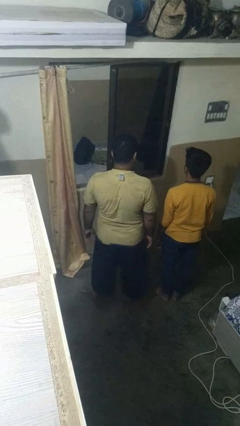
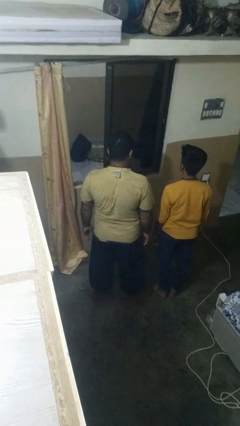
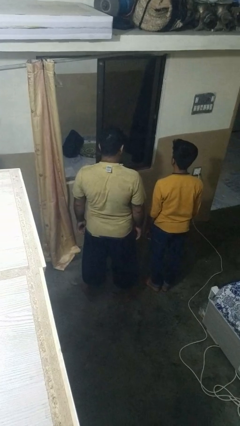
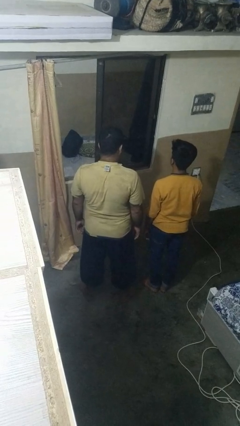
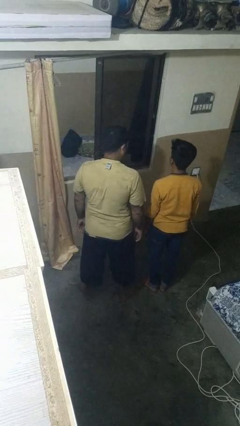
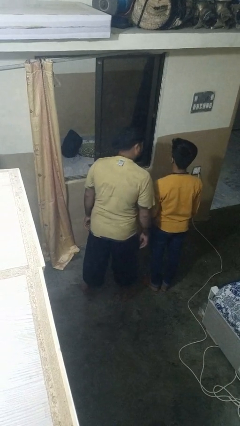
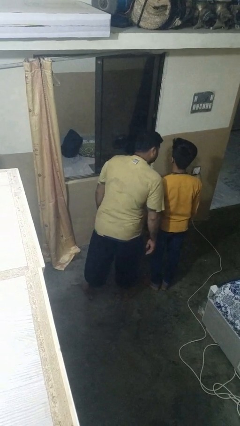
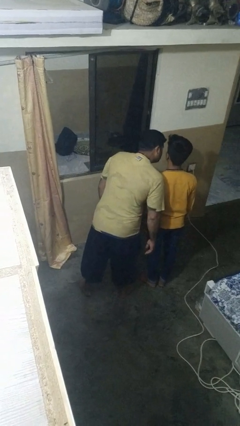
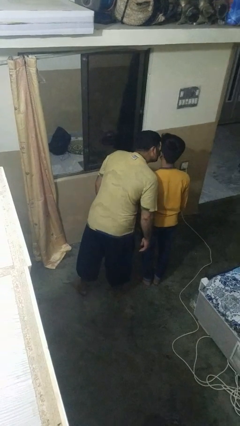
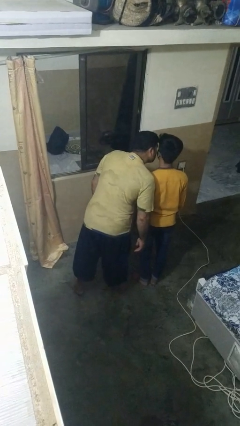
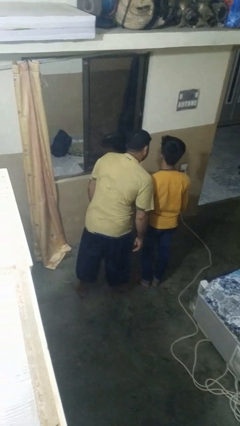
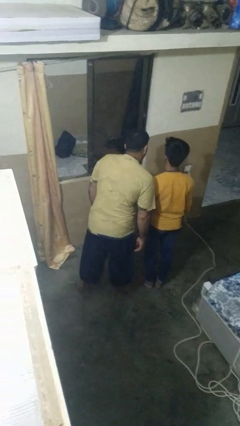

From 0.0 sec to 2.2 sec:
person kisses cheek of person

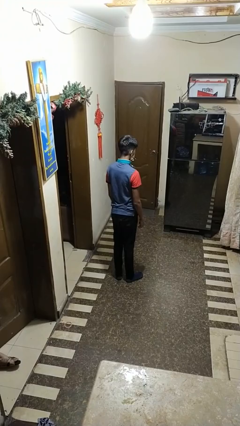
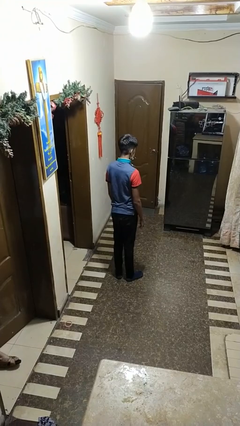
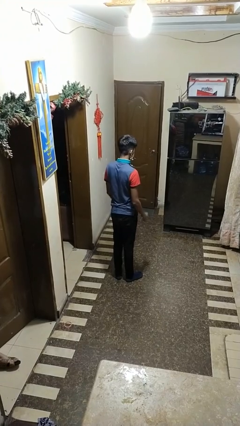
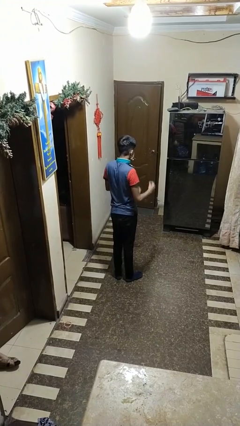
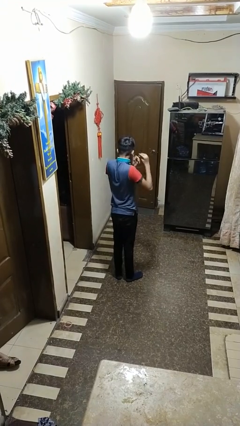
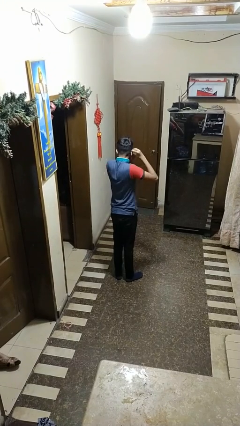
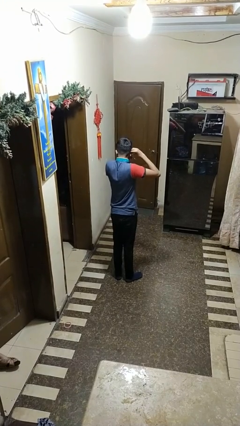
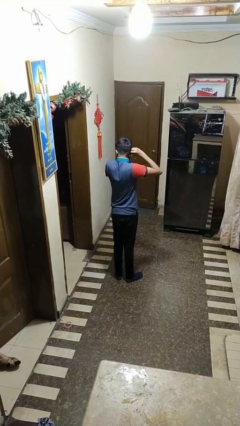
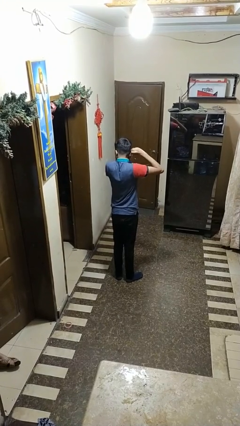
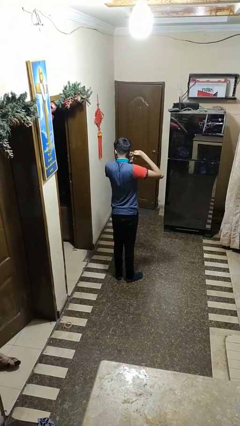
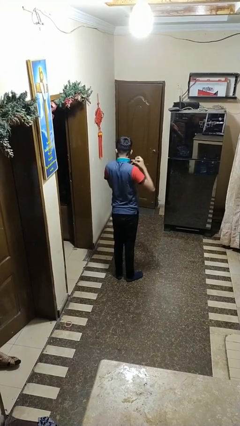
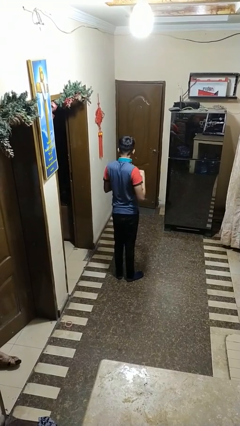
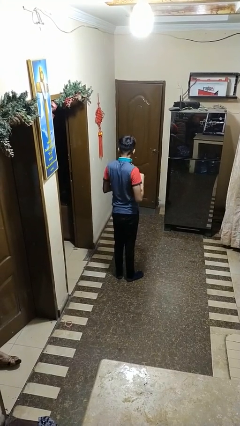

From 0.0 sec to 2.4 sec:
person takes off earrings

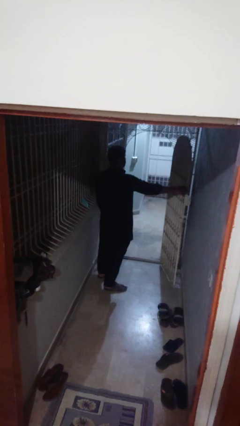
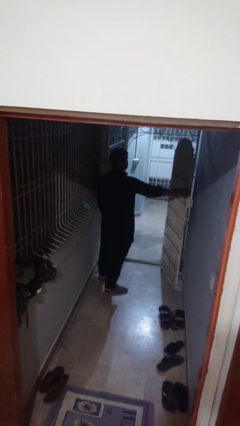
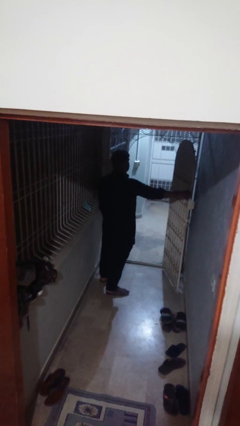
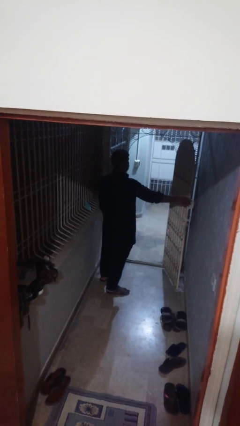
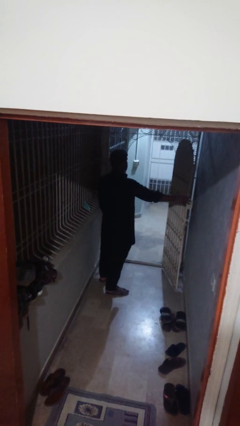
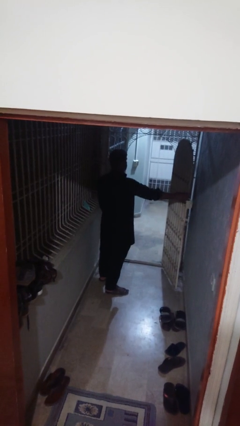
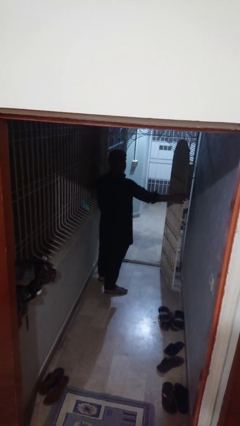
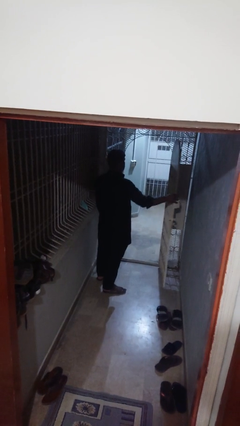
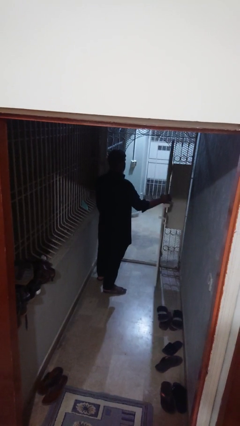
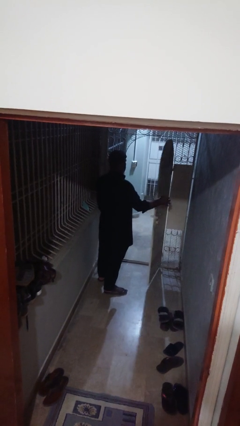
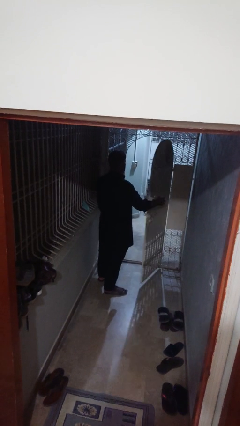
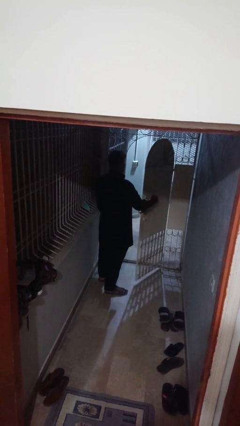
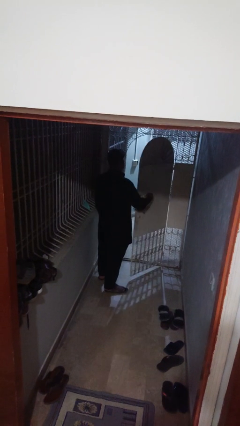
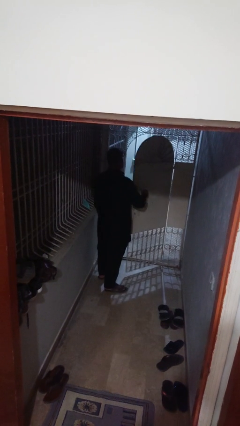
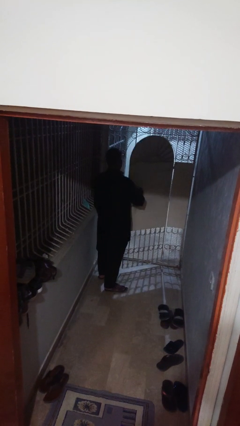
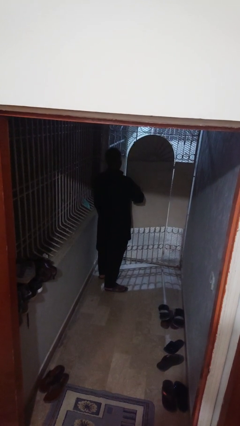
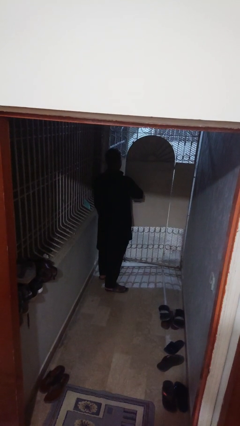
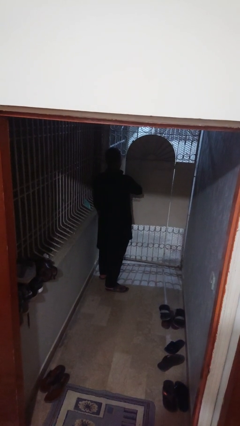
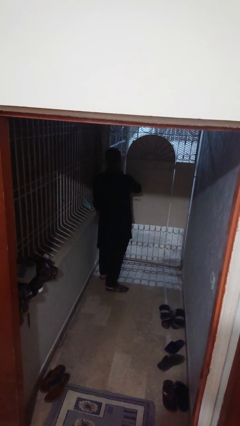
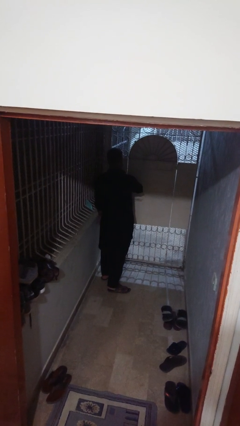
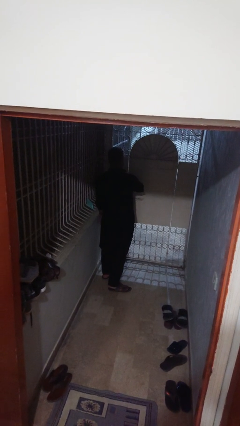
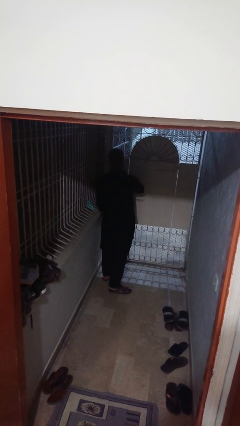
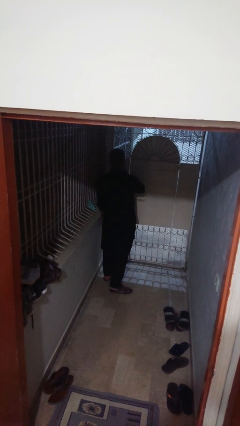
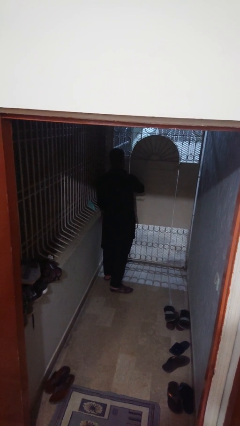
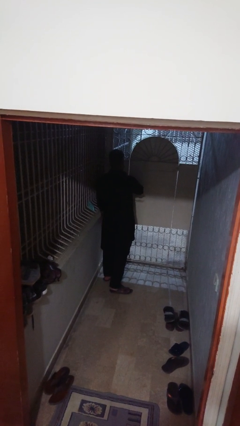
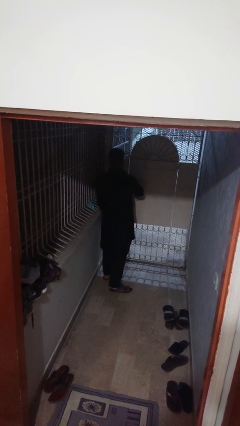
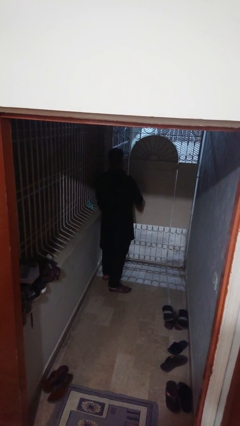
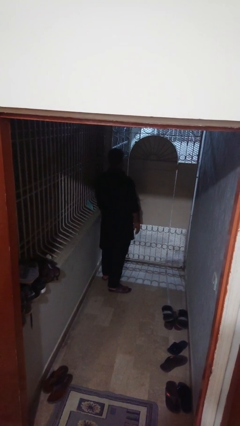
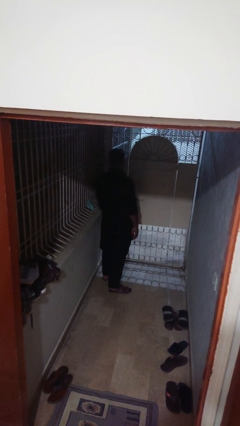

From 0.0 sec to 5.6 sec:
person closes gate

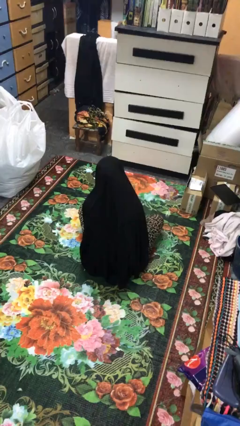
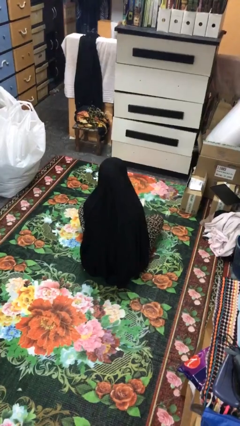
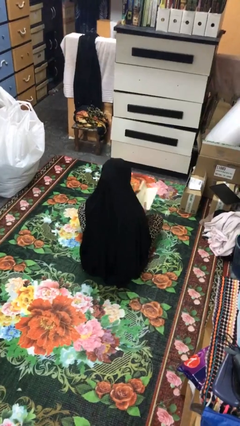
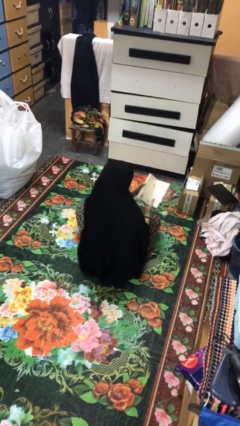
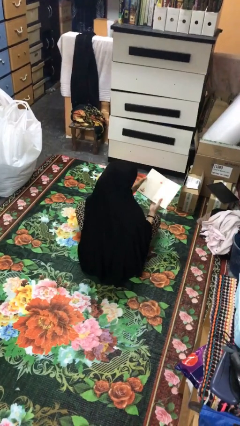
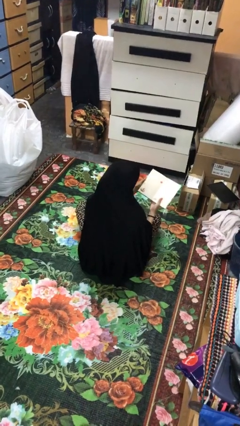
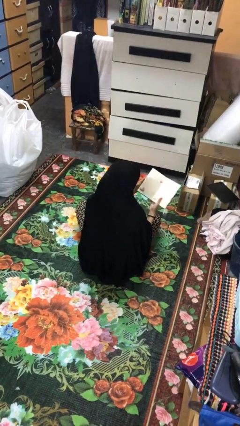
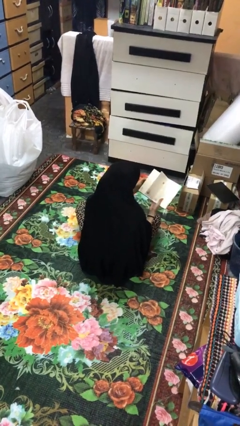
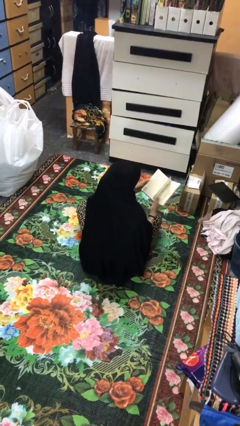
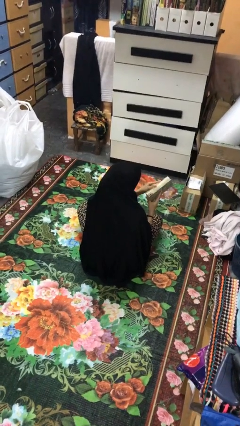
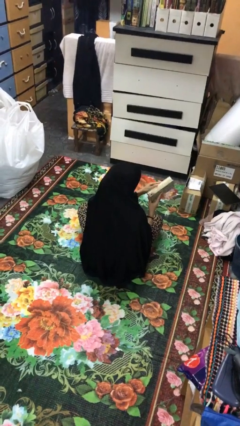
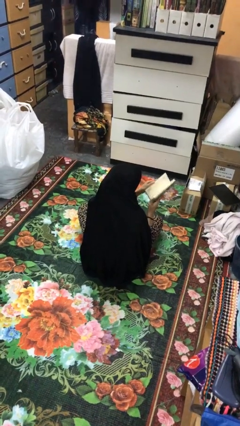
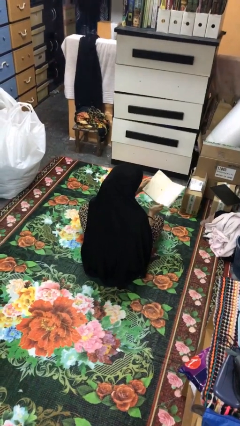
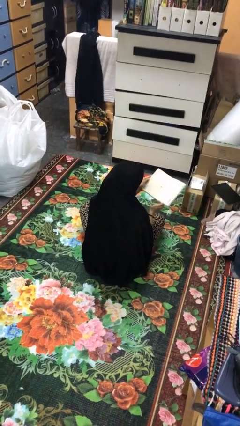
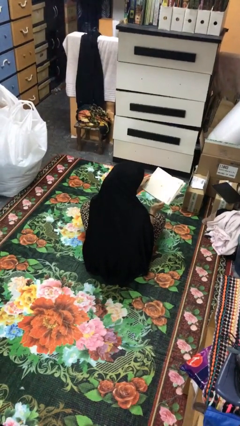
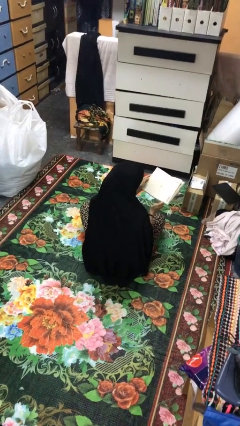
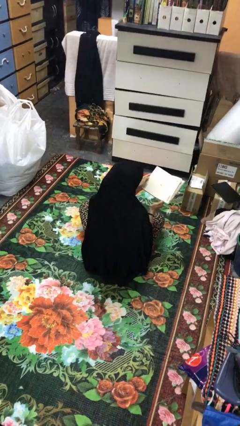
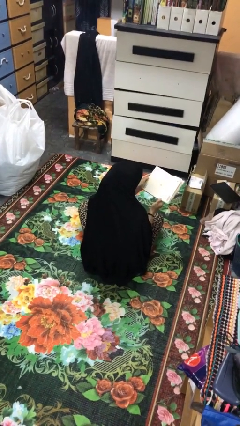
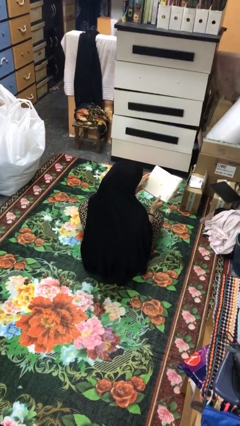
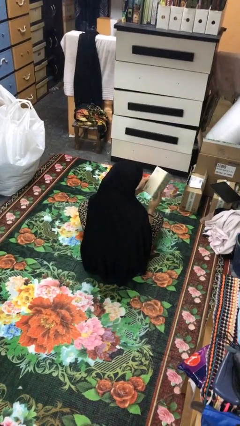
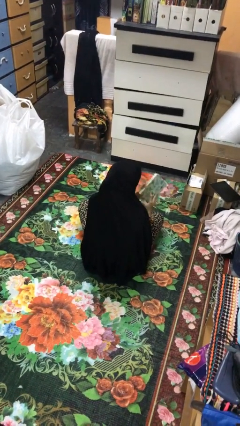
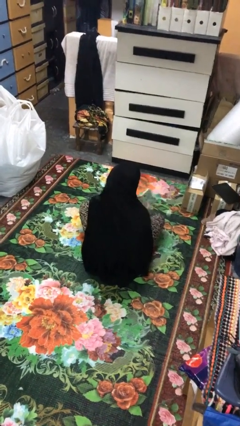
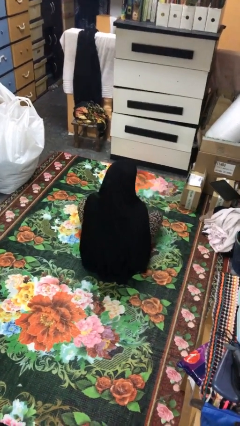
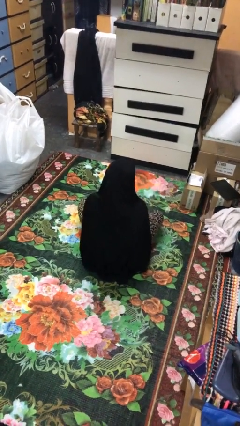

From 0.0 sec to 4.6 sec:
person reads book

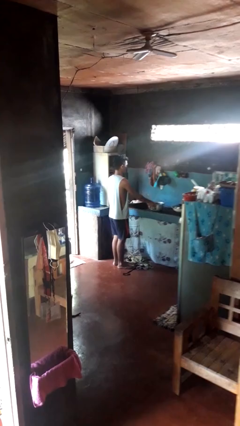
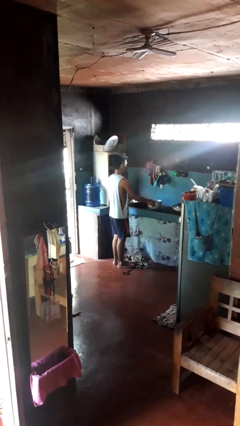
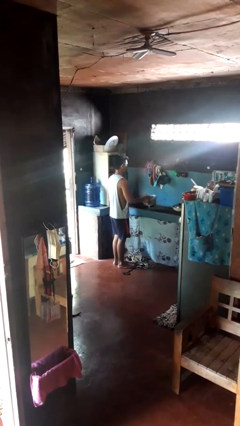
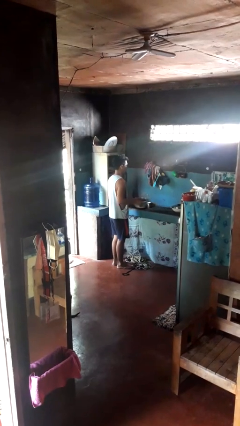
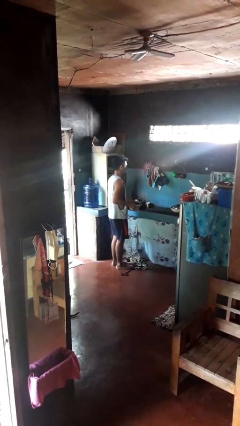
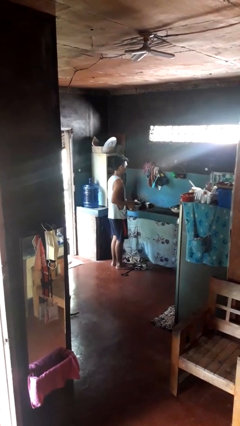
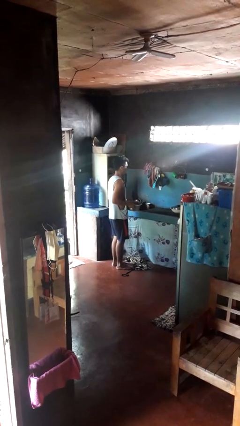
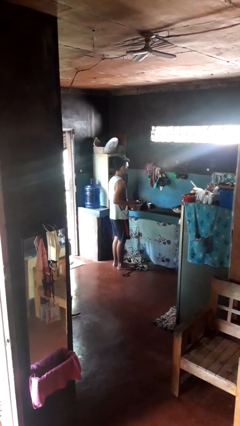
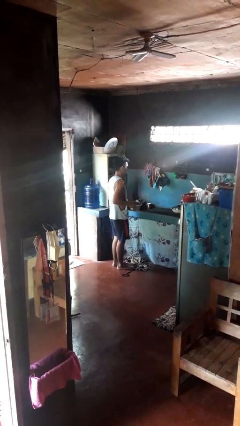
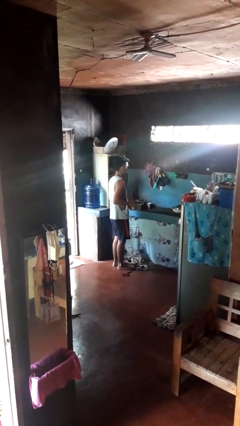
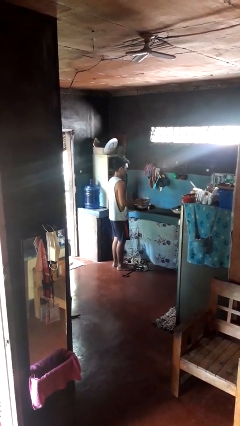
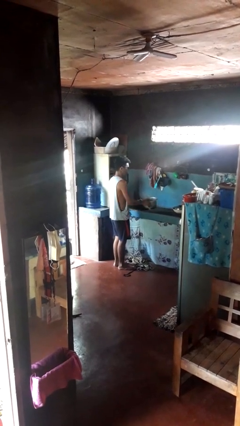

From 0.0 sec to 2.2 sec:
person picks up object from countertop

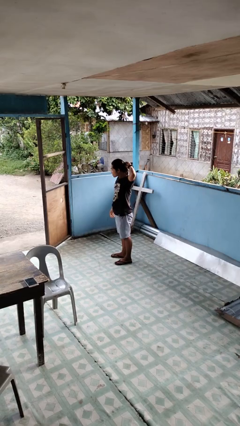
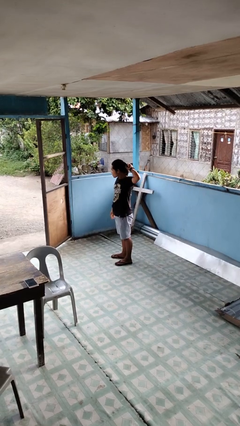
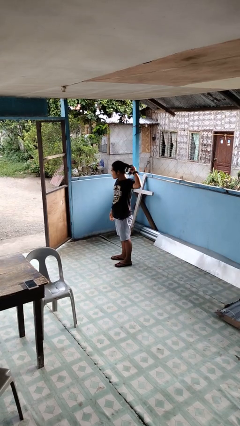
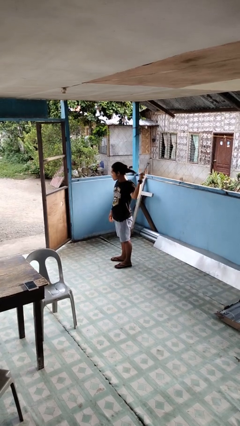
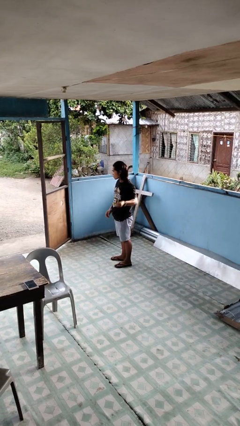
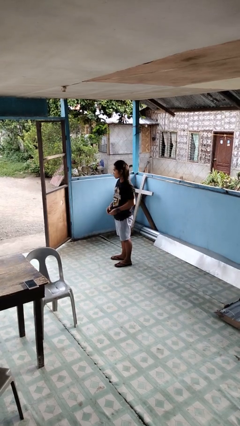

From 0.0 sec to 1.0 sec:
person takes off hairtie
